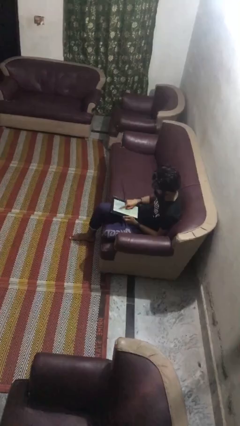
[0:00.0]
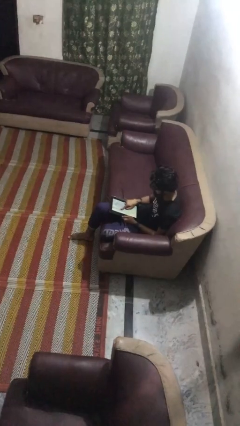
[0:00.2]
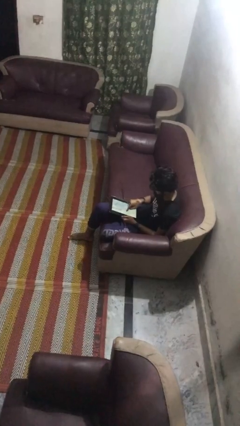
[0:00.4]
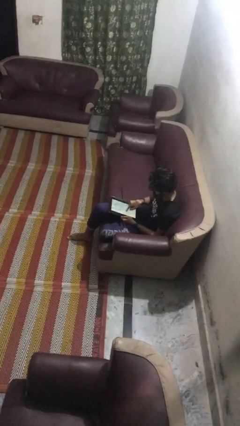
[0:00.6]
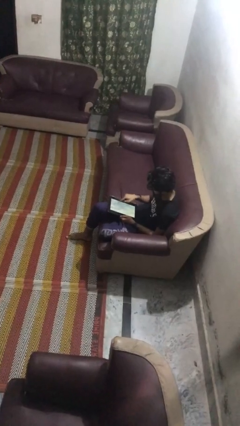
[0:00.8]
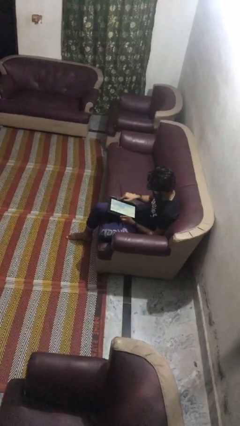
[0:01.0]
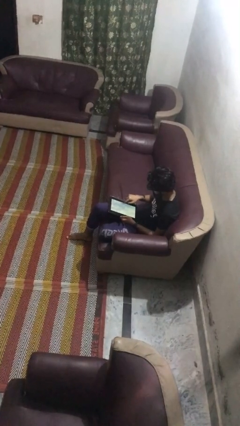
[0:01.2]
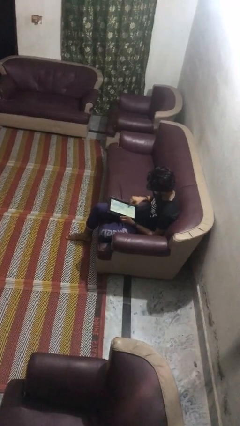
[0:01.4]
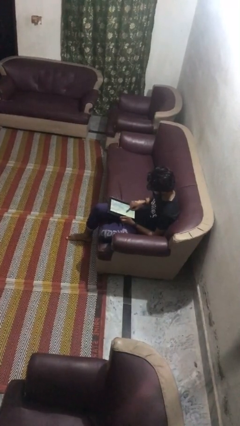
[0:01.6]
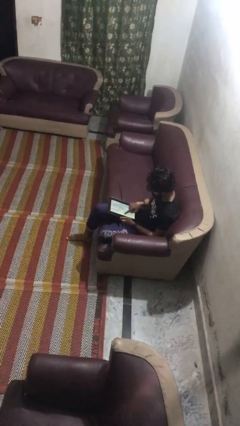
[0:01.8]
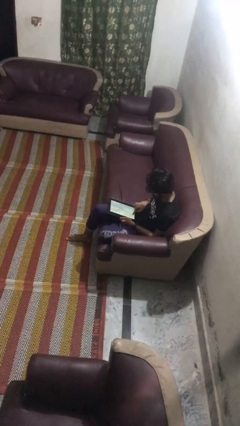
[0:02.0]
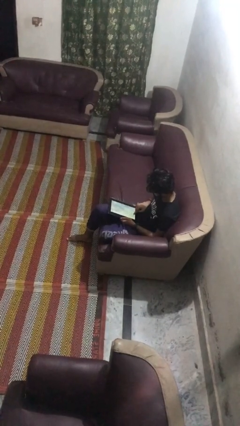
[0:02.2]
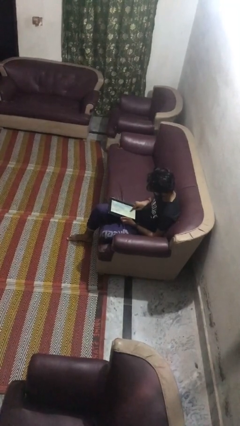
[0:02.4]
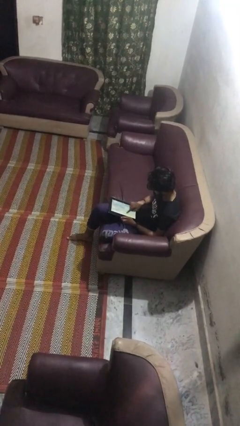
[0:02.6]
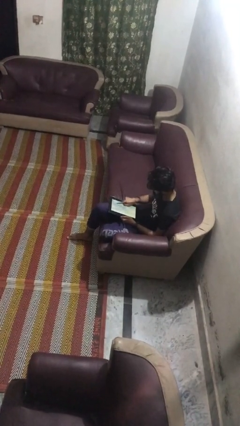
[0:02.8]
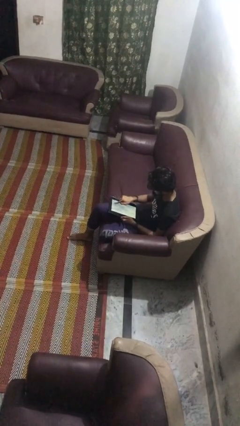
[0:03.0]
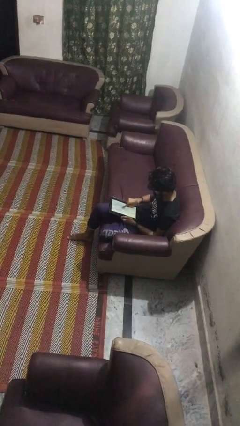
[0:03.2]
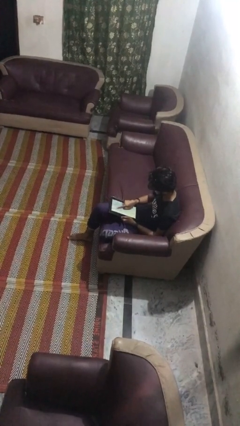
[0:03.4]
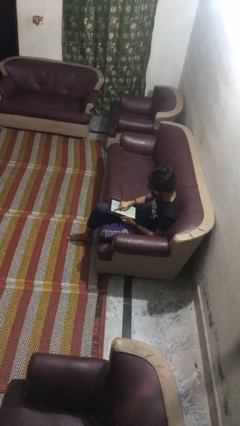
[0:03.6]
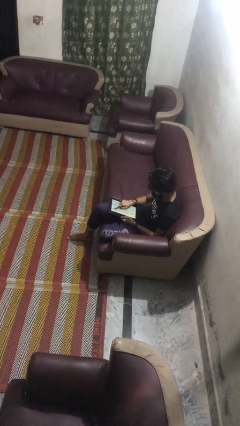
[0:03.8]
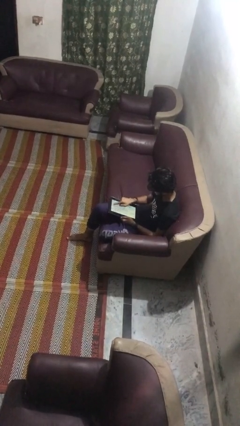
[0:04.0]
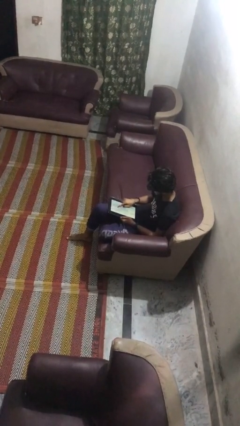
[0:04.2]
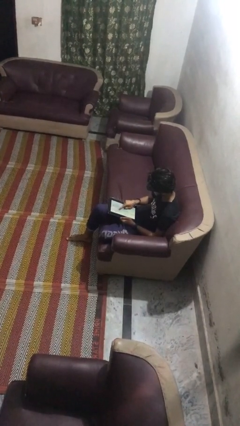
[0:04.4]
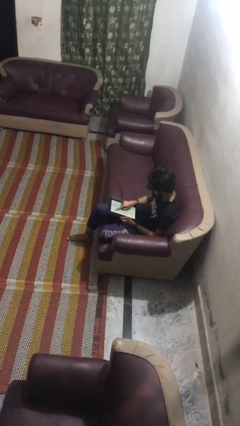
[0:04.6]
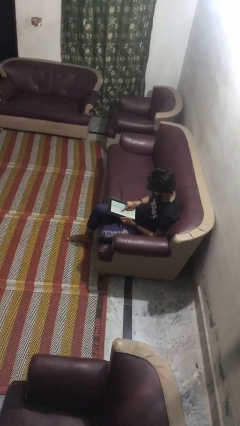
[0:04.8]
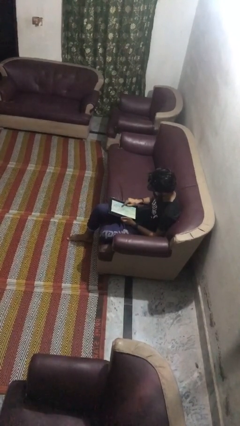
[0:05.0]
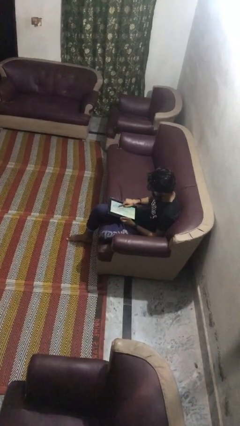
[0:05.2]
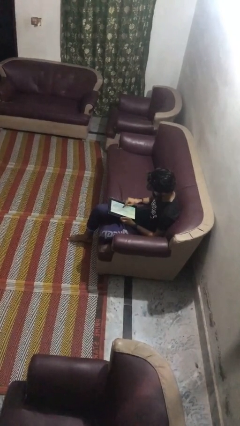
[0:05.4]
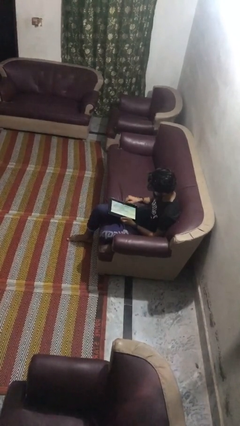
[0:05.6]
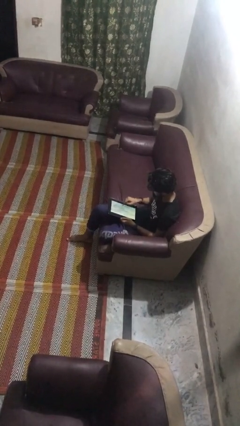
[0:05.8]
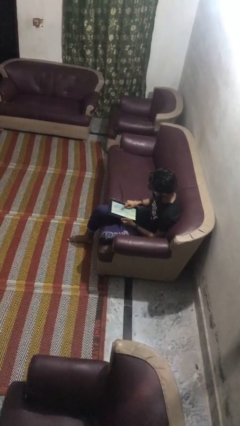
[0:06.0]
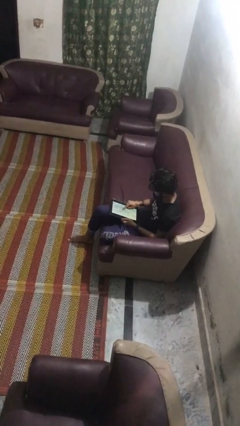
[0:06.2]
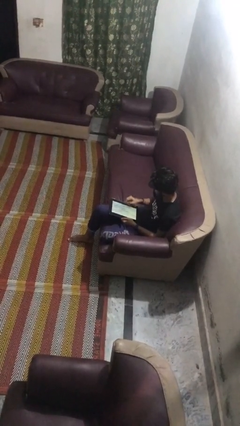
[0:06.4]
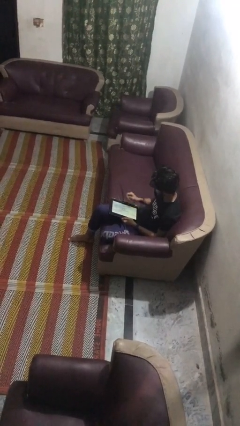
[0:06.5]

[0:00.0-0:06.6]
person interacts with tablet

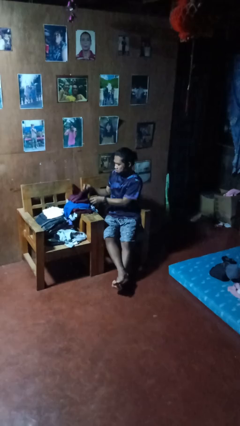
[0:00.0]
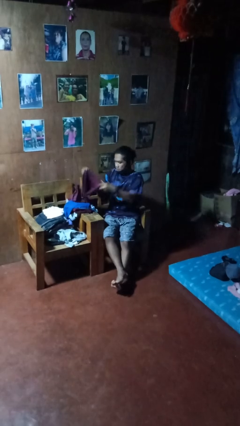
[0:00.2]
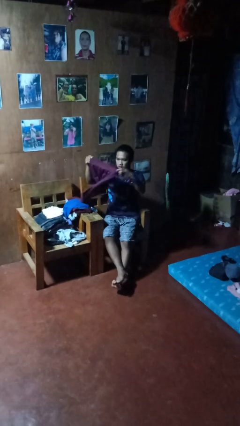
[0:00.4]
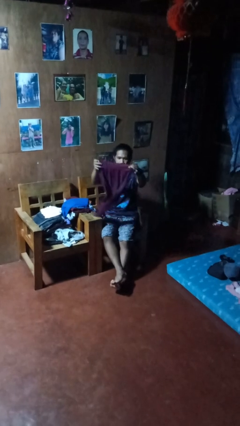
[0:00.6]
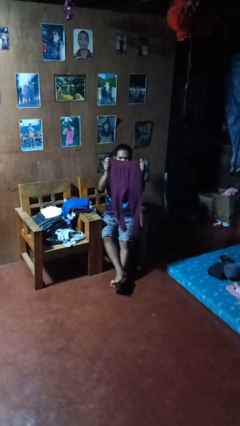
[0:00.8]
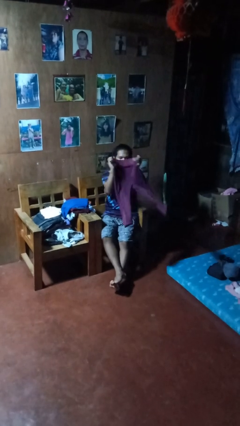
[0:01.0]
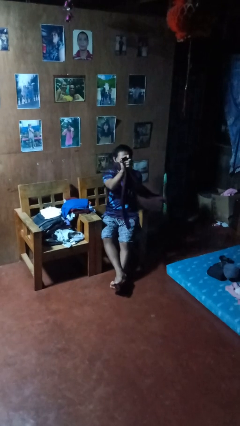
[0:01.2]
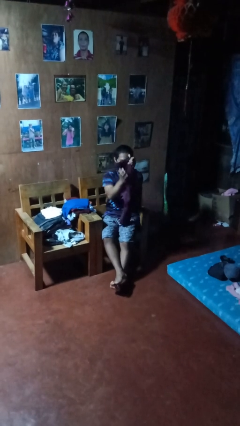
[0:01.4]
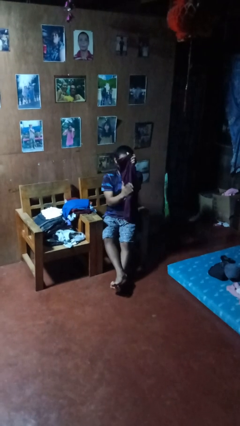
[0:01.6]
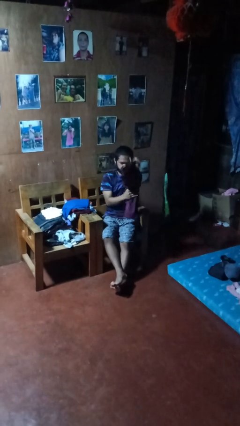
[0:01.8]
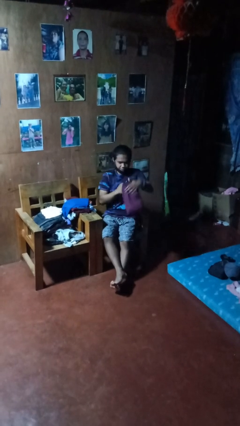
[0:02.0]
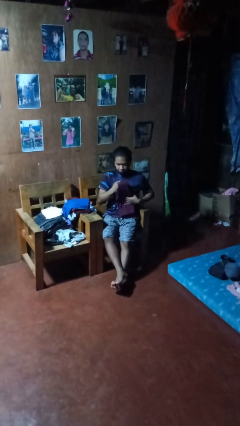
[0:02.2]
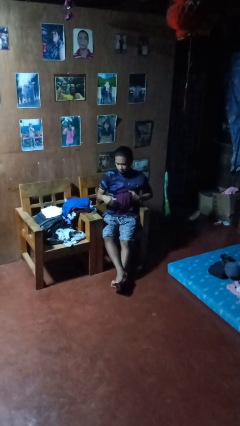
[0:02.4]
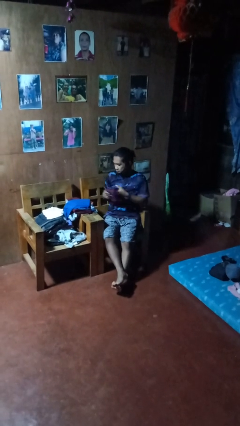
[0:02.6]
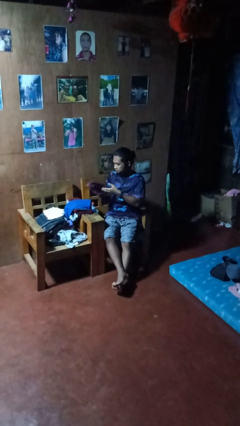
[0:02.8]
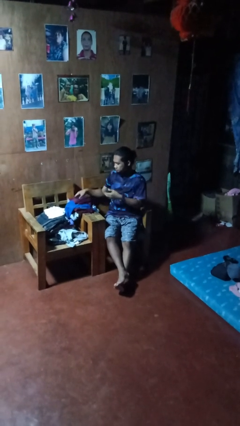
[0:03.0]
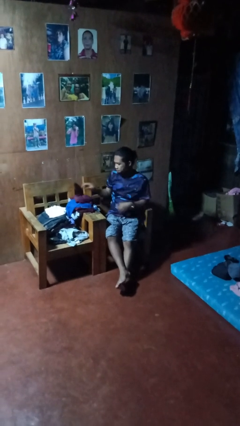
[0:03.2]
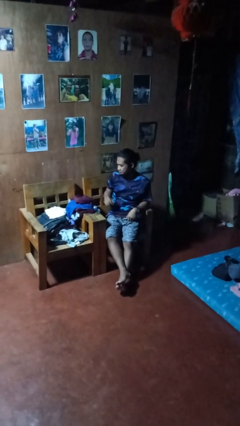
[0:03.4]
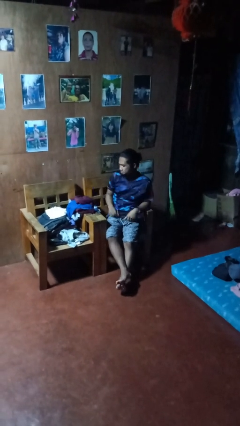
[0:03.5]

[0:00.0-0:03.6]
person folds pants

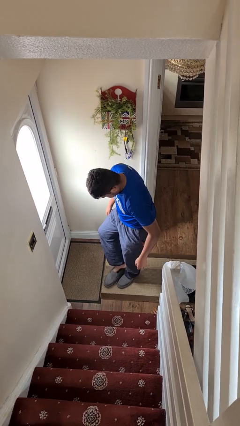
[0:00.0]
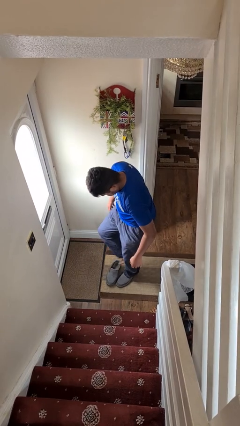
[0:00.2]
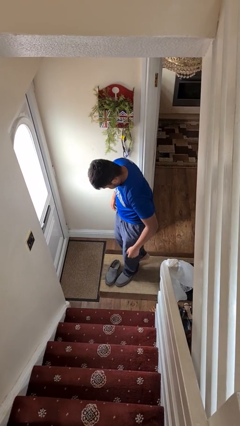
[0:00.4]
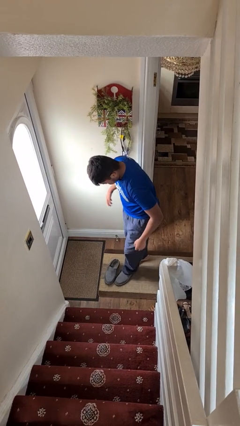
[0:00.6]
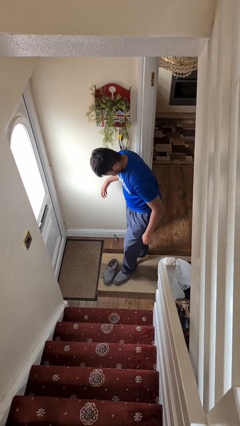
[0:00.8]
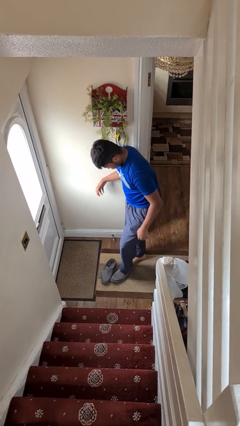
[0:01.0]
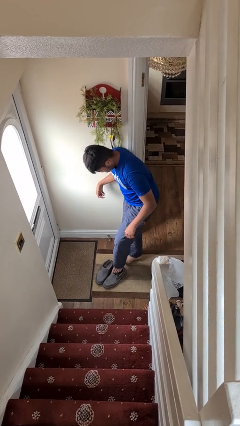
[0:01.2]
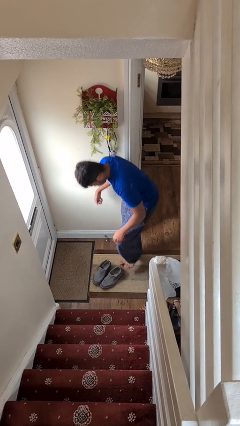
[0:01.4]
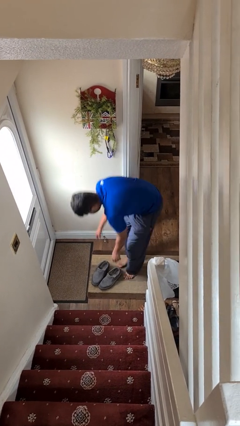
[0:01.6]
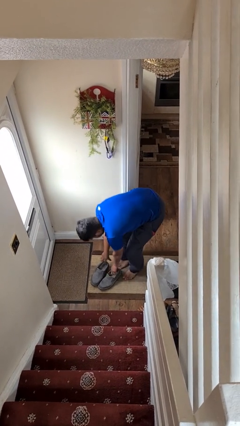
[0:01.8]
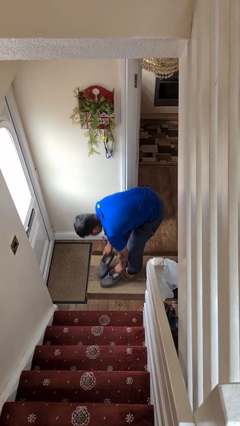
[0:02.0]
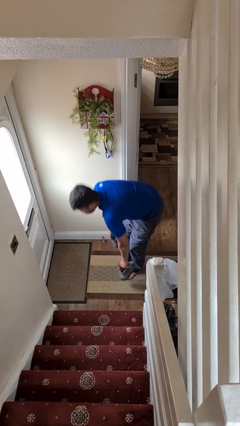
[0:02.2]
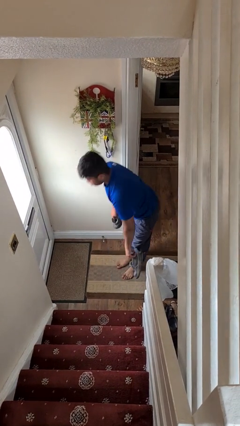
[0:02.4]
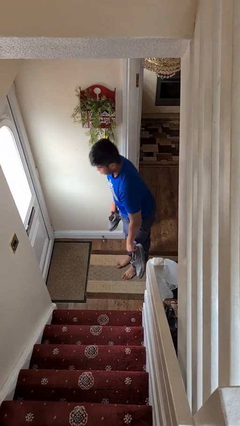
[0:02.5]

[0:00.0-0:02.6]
person takes off shoes

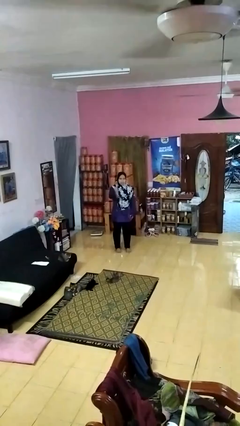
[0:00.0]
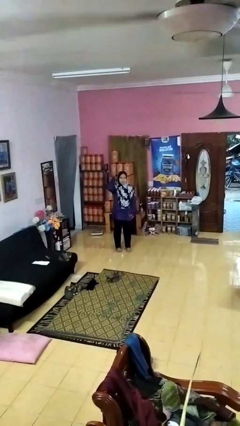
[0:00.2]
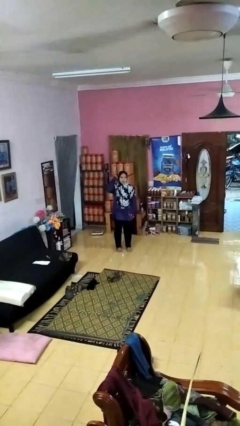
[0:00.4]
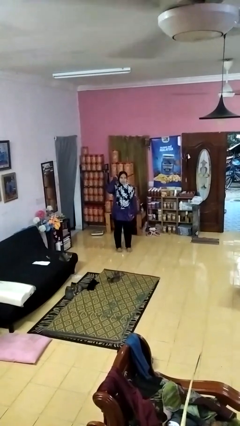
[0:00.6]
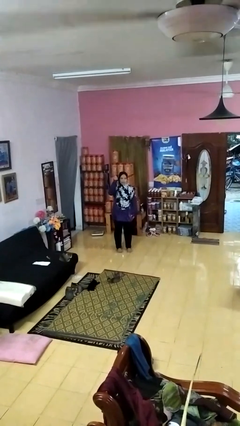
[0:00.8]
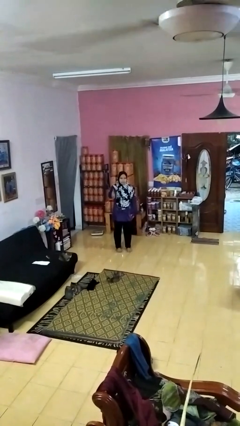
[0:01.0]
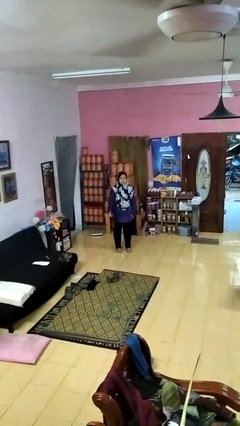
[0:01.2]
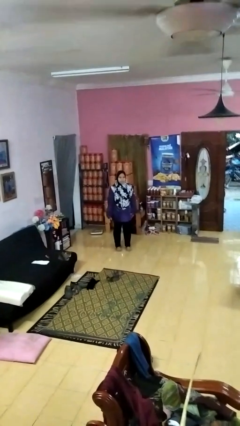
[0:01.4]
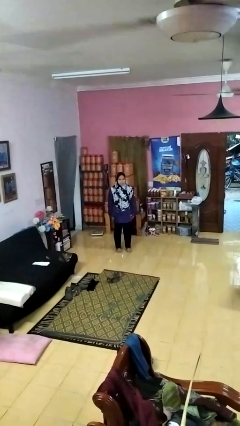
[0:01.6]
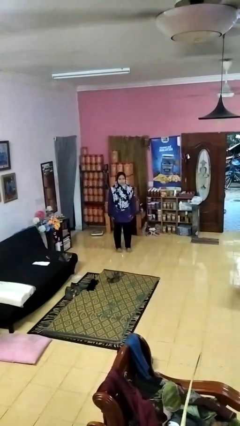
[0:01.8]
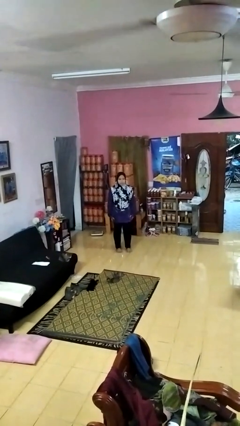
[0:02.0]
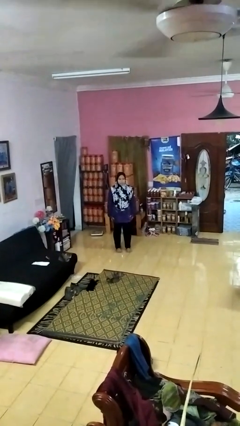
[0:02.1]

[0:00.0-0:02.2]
person gestures behind me

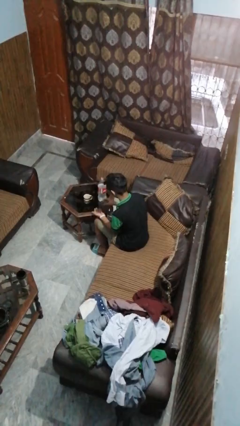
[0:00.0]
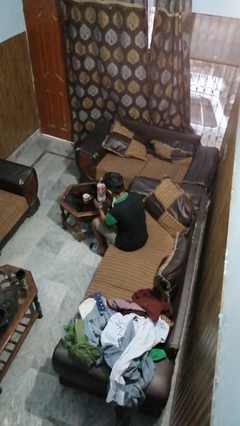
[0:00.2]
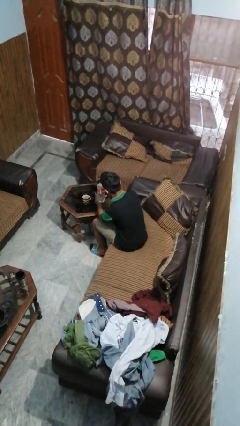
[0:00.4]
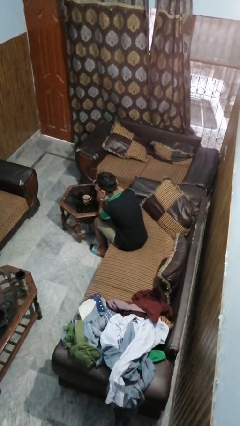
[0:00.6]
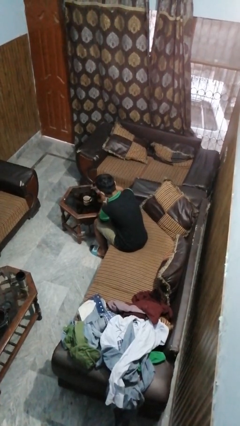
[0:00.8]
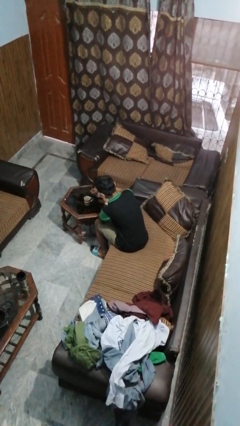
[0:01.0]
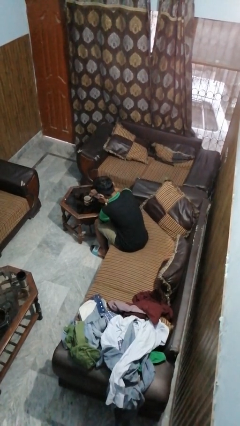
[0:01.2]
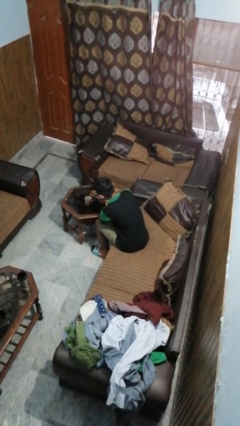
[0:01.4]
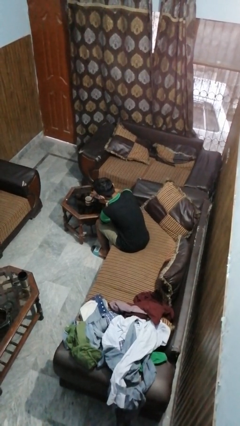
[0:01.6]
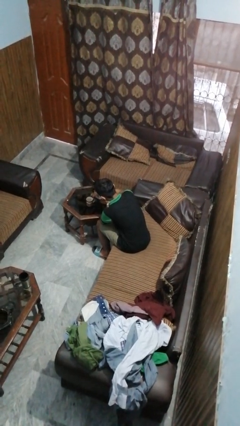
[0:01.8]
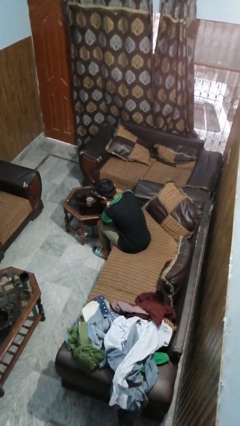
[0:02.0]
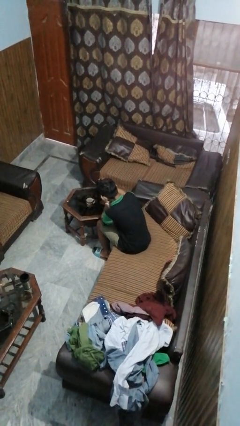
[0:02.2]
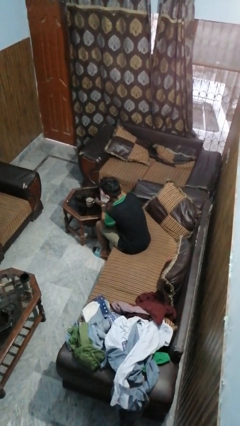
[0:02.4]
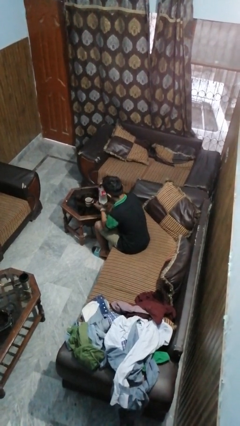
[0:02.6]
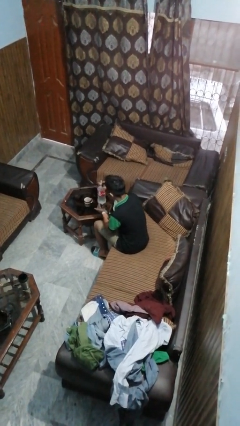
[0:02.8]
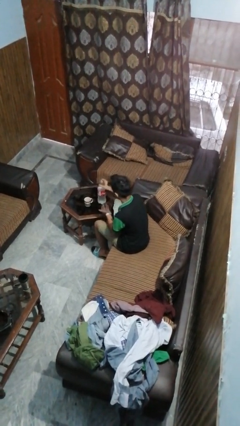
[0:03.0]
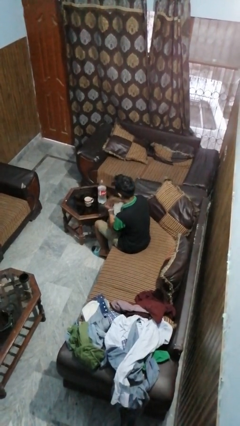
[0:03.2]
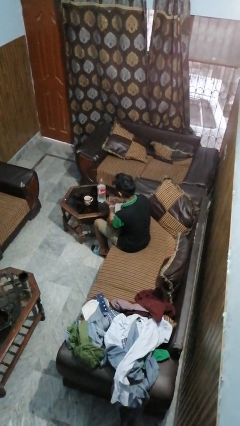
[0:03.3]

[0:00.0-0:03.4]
person pours liquid into cup
